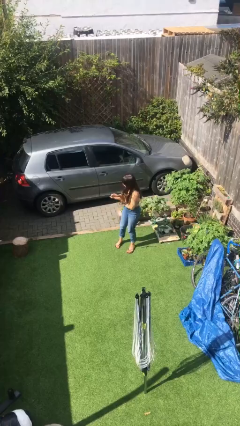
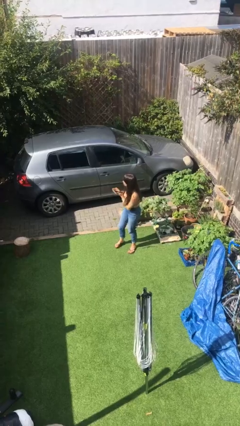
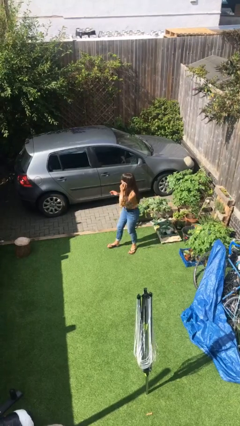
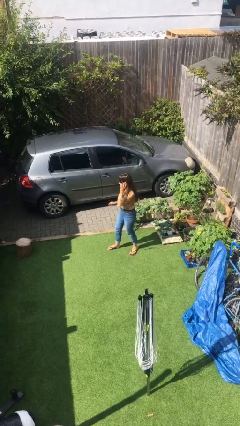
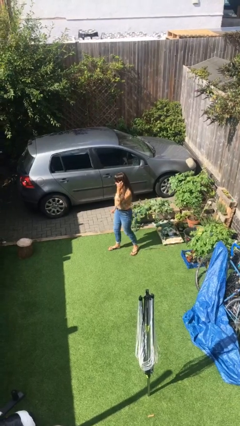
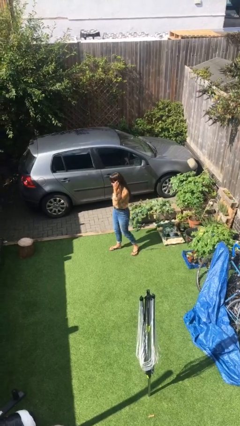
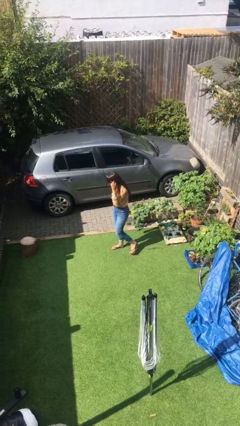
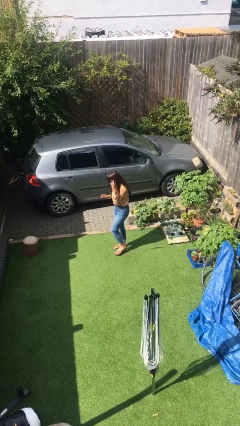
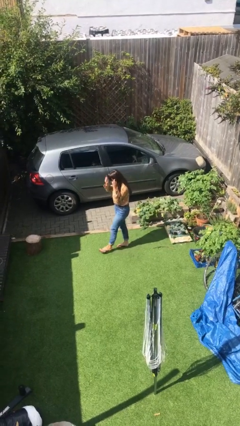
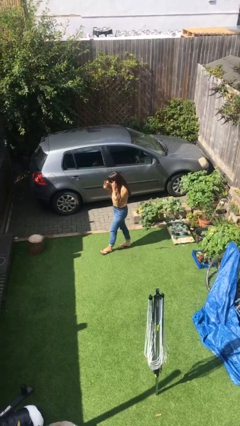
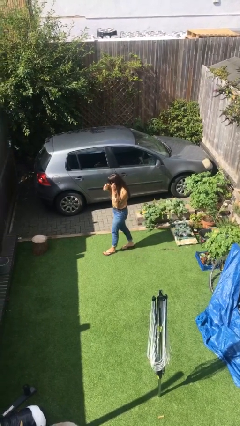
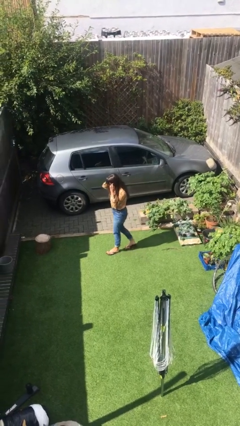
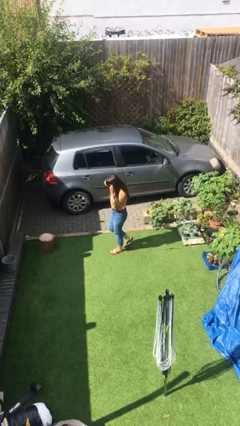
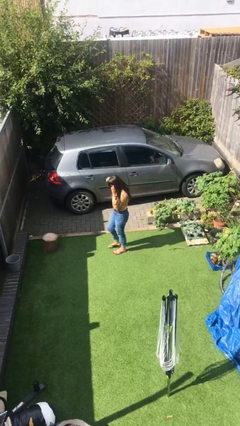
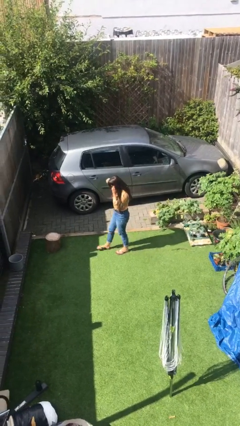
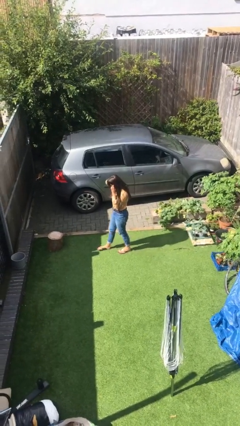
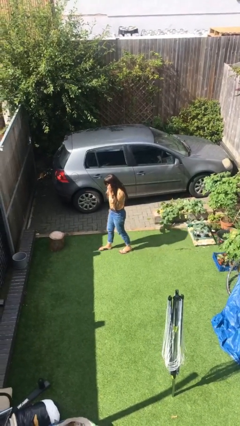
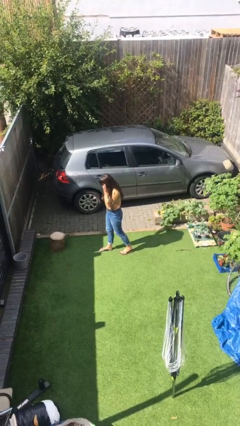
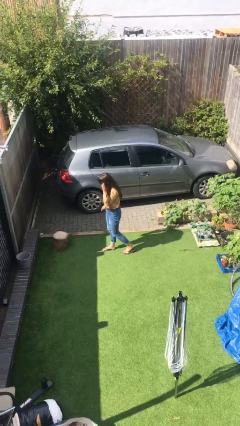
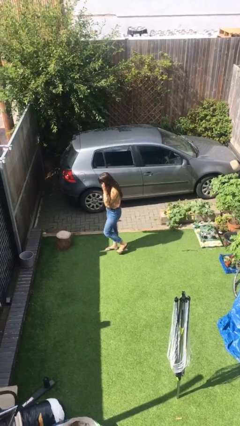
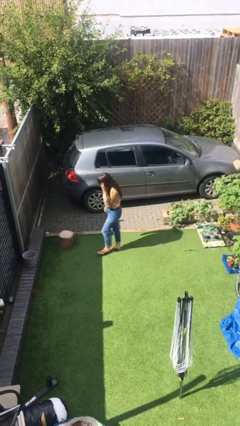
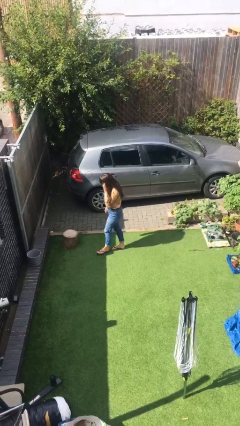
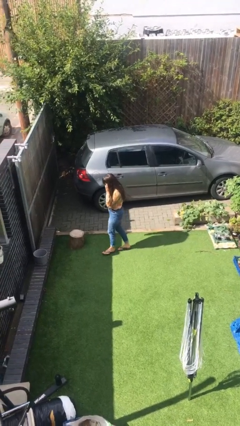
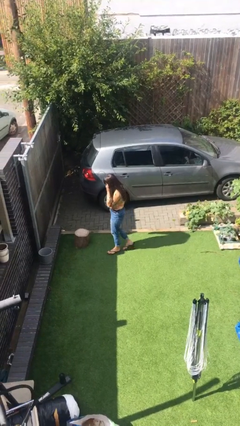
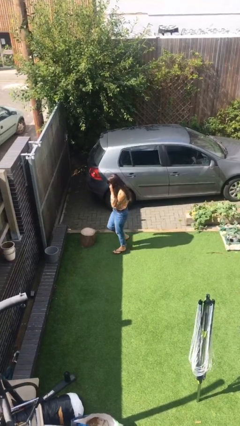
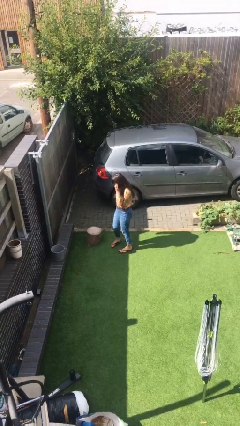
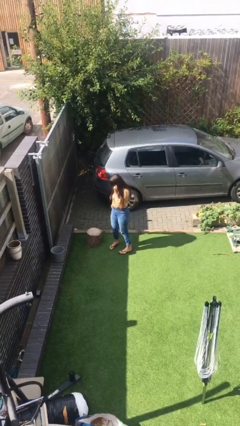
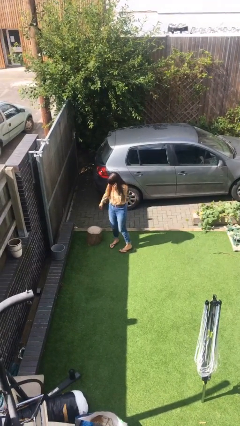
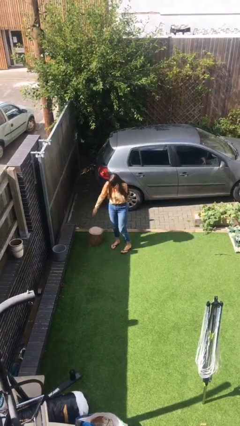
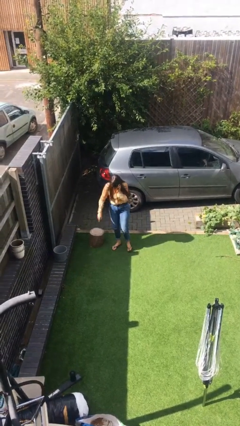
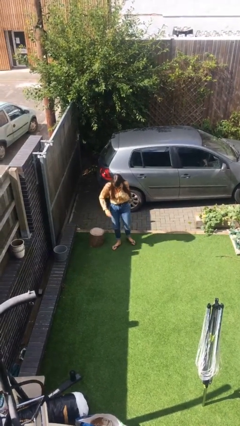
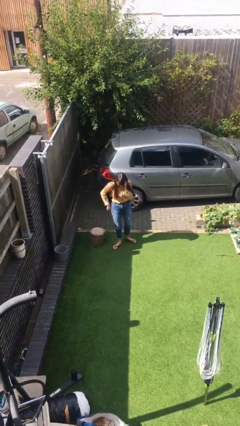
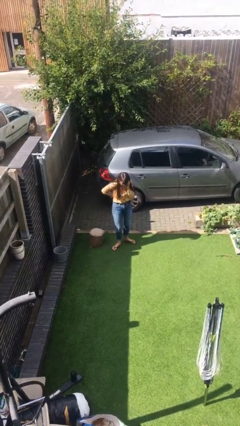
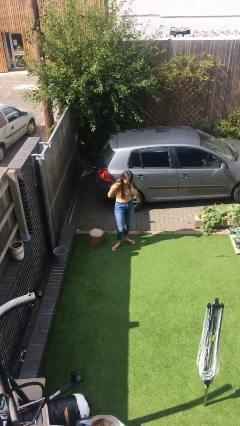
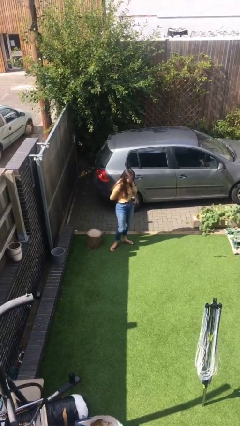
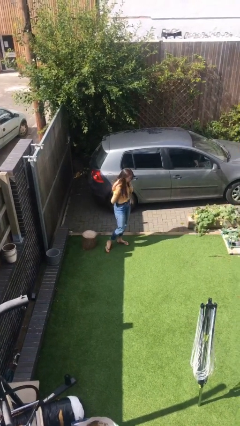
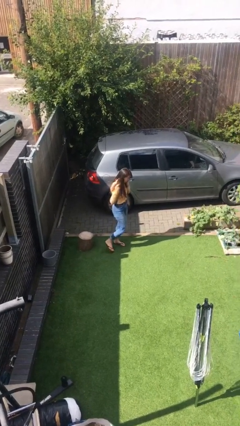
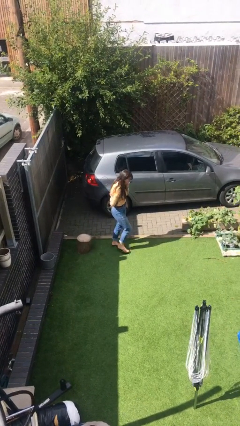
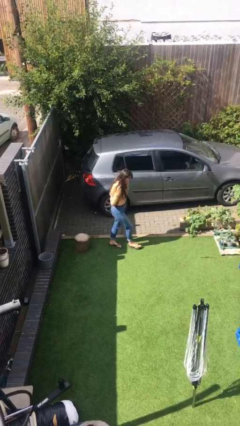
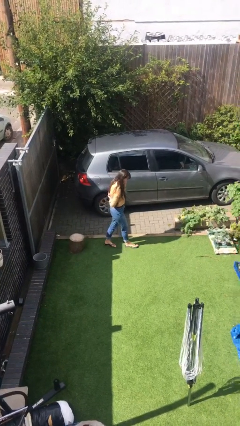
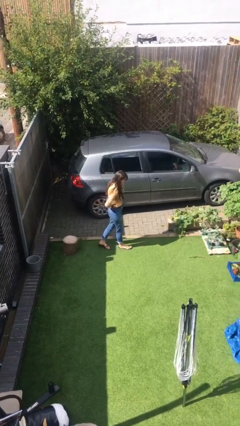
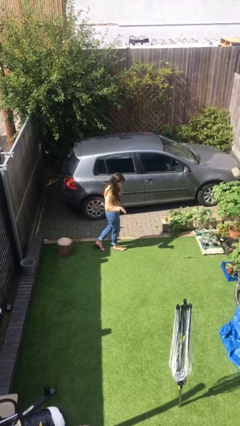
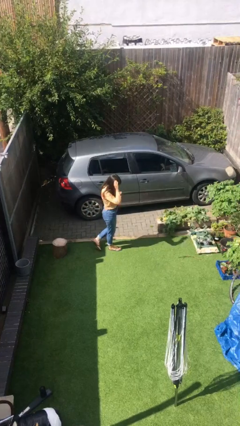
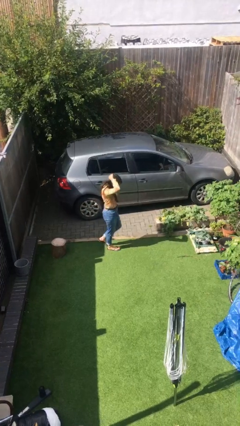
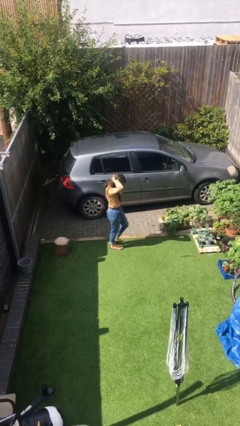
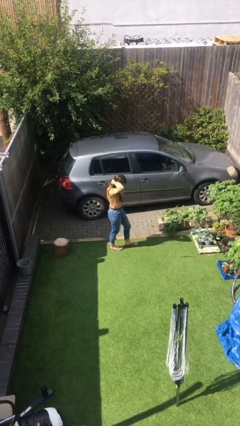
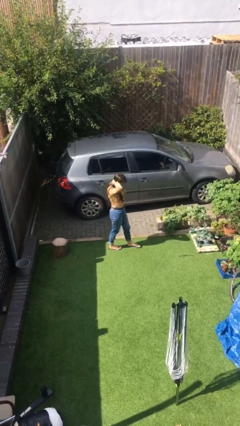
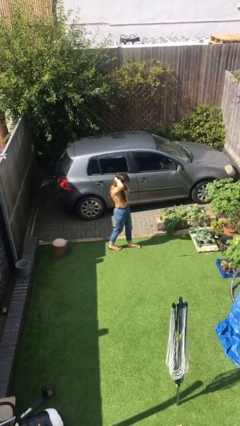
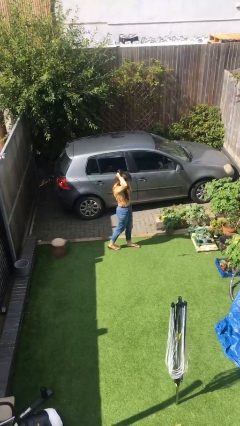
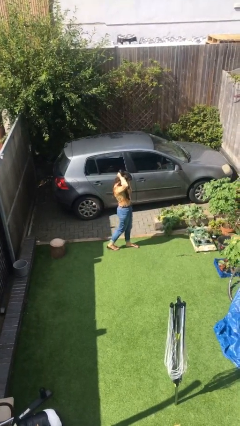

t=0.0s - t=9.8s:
person talks on phone

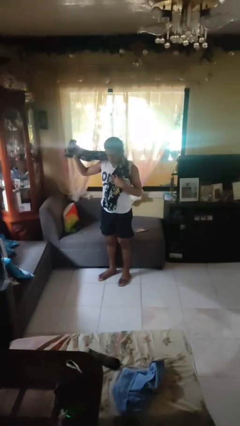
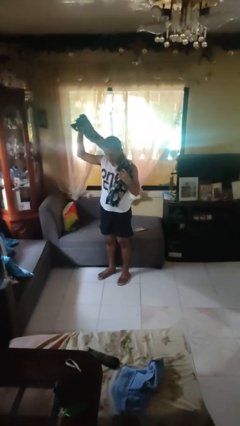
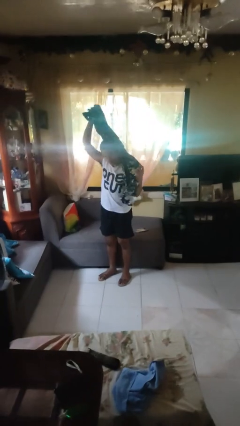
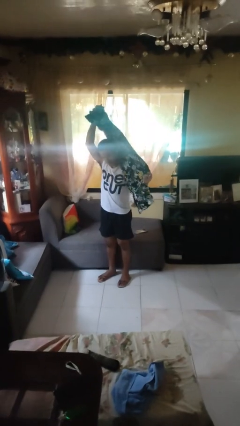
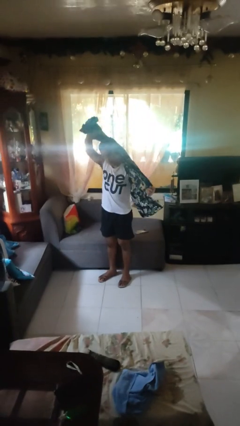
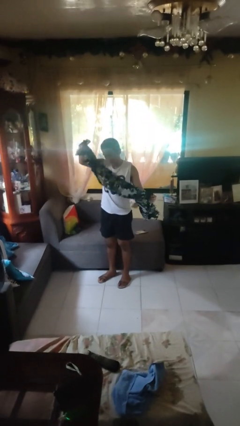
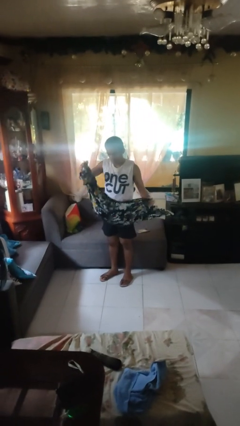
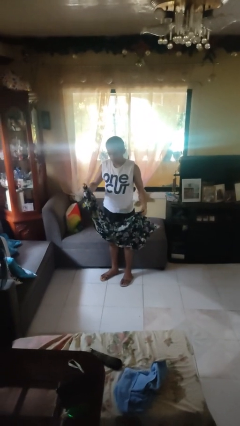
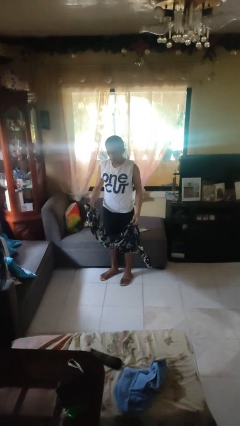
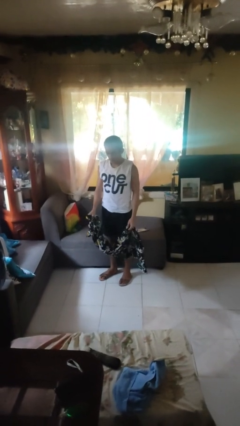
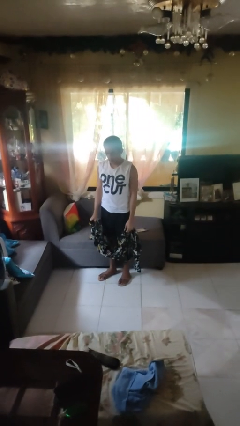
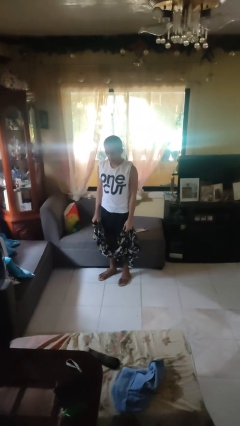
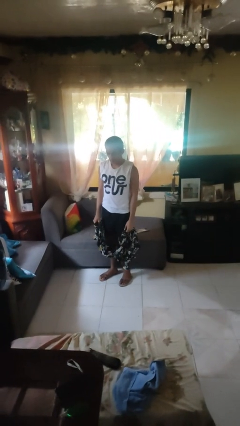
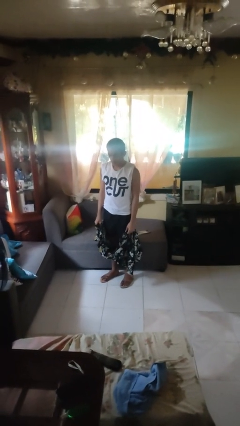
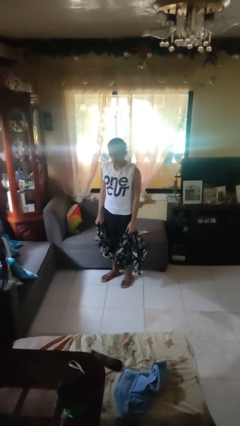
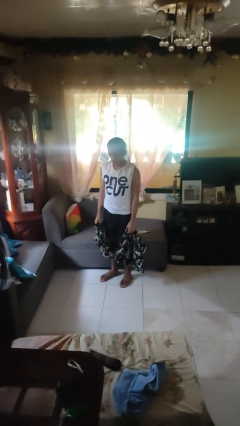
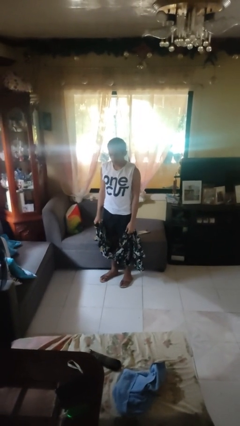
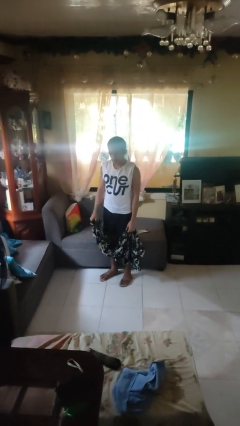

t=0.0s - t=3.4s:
person takes off scarf

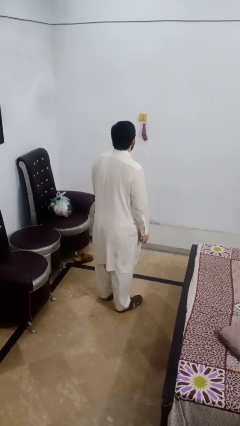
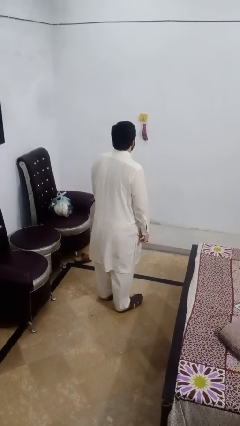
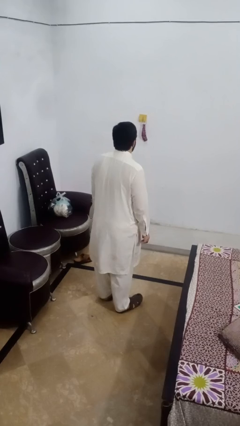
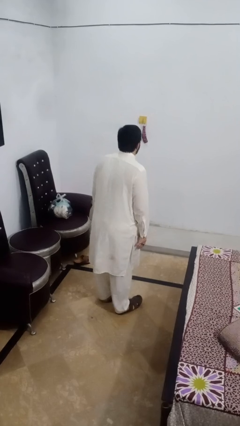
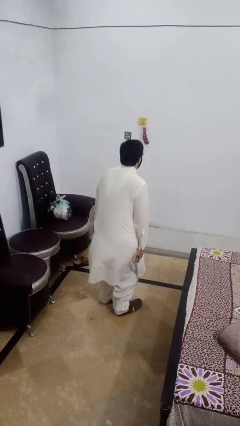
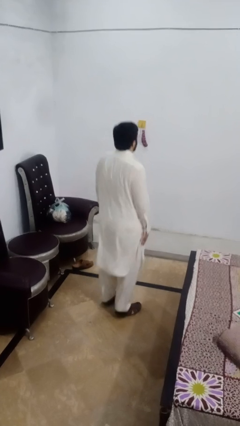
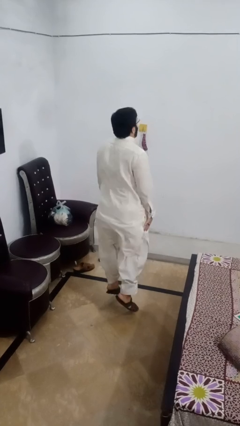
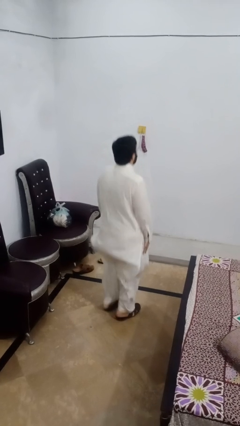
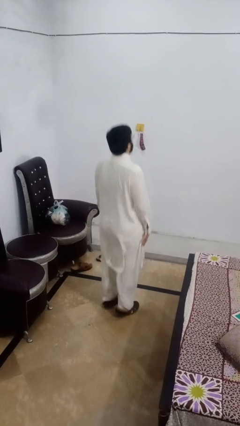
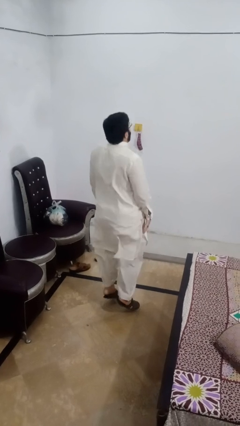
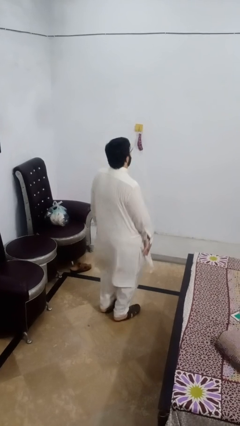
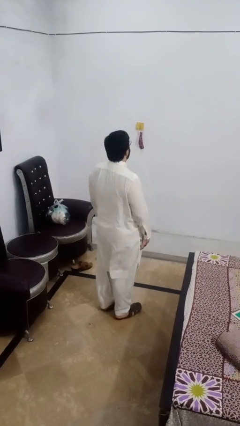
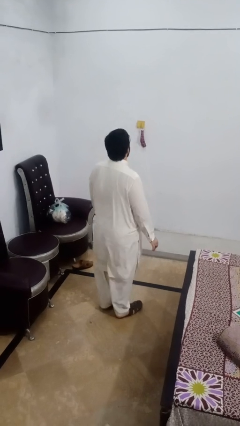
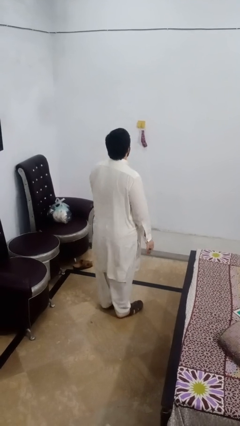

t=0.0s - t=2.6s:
person jumps

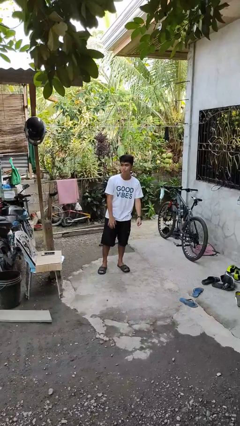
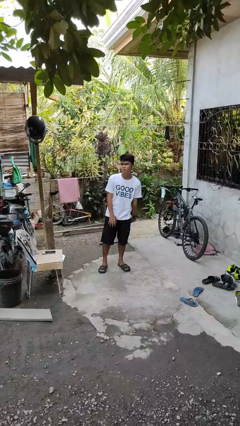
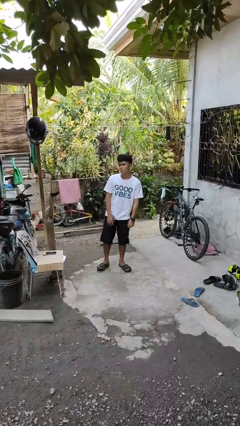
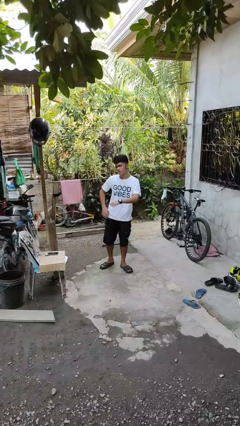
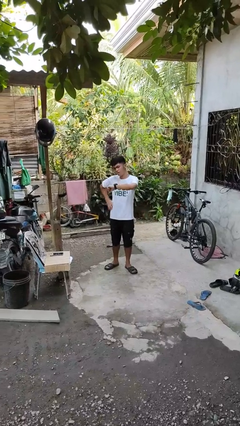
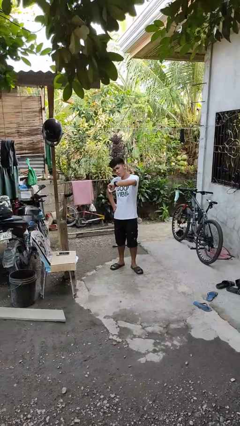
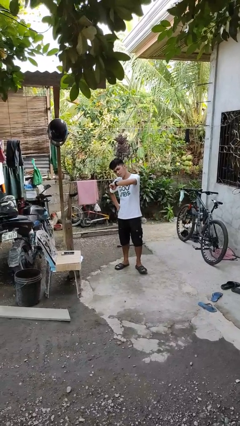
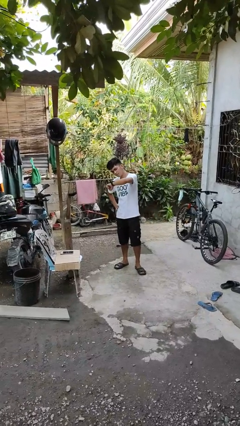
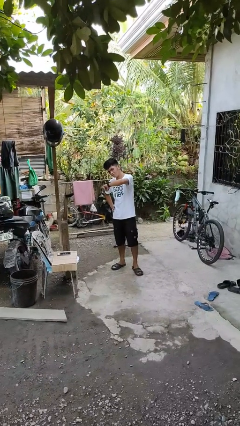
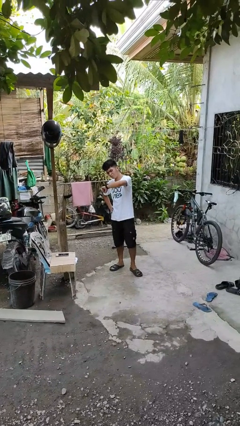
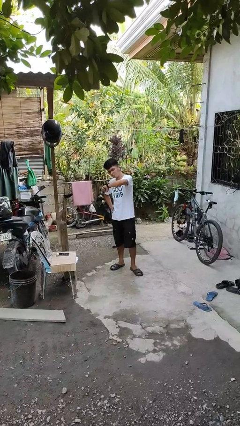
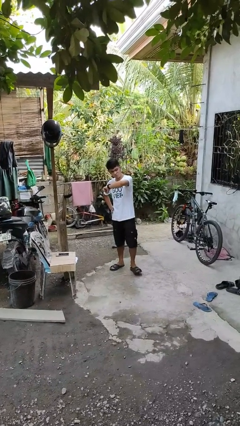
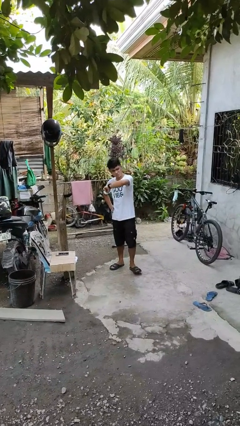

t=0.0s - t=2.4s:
person looks at wristwatch

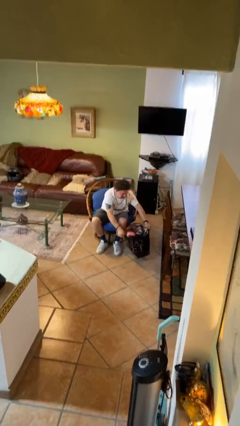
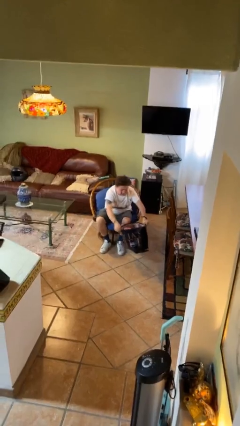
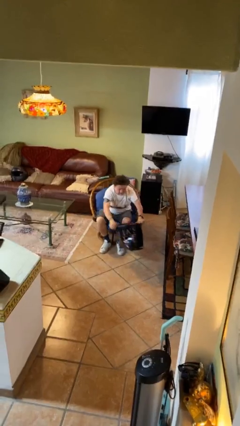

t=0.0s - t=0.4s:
person picks up object from floor
